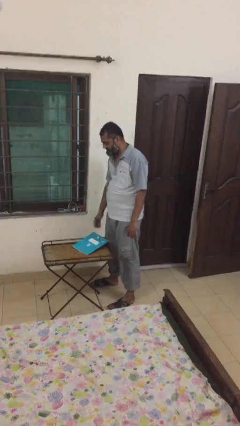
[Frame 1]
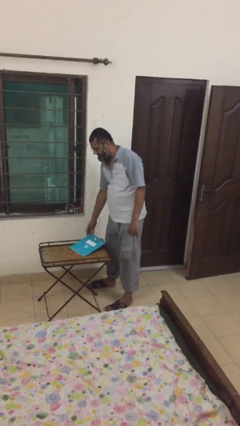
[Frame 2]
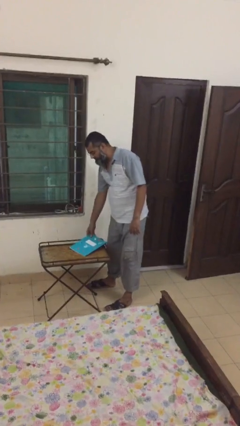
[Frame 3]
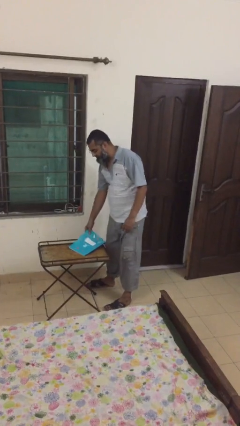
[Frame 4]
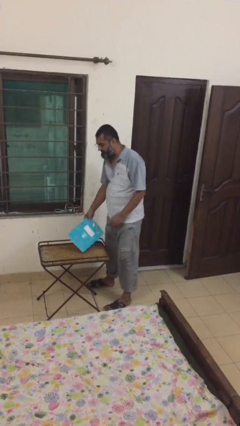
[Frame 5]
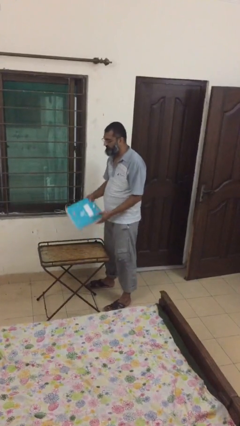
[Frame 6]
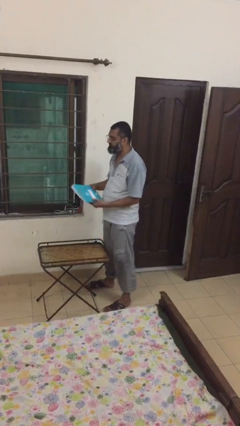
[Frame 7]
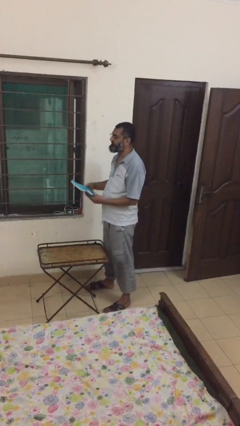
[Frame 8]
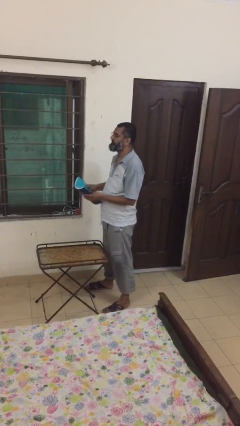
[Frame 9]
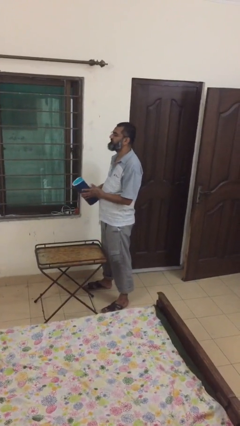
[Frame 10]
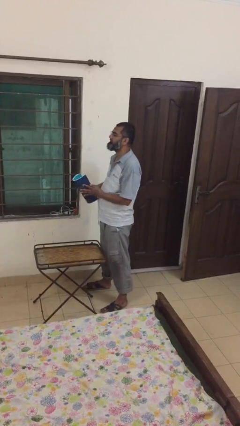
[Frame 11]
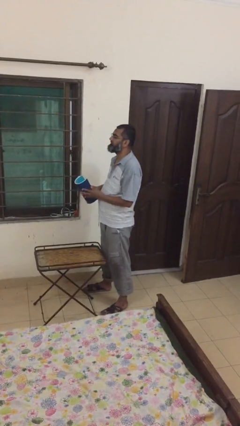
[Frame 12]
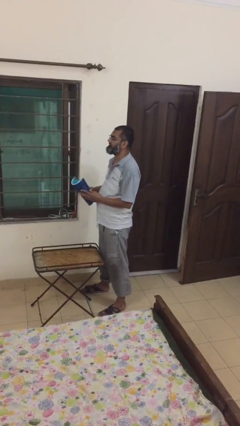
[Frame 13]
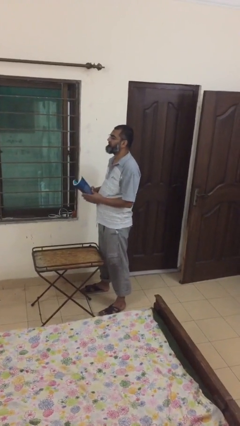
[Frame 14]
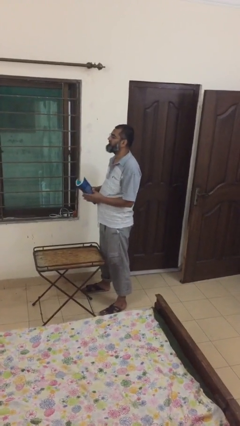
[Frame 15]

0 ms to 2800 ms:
person picks up object from table

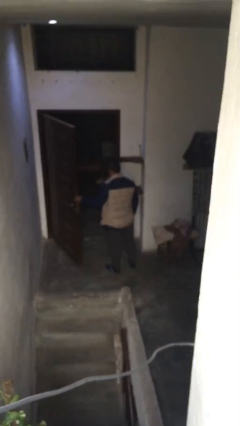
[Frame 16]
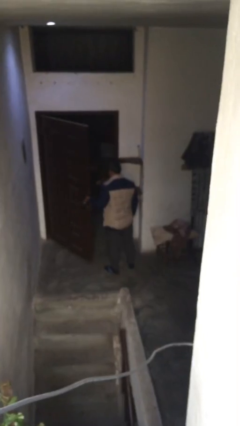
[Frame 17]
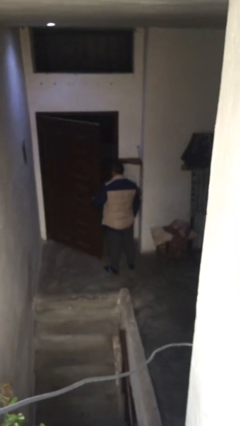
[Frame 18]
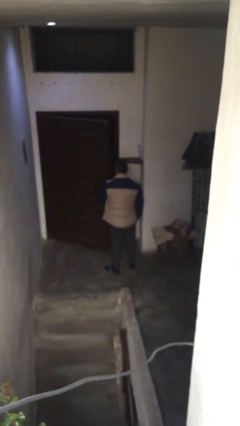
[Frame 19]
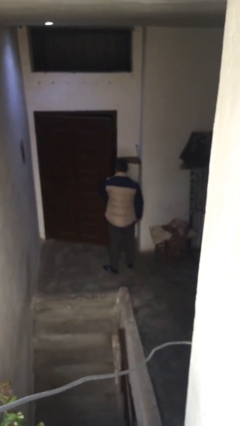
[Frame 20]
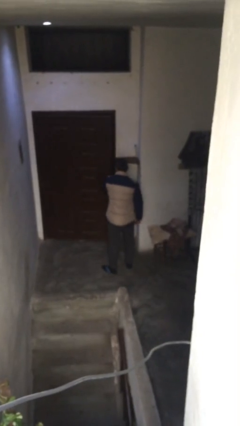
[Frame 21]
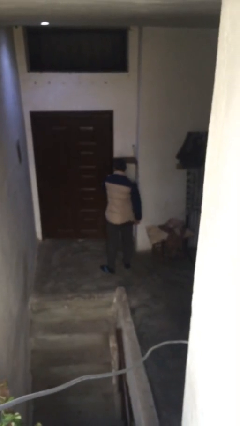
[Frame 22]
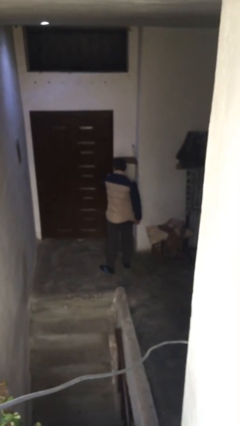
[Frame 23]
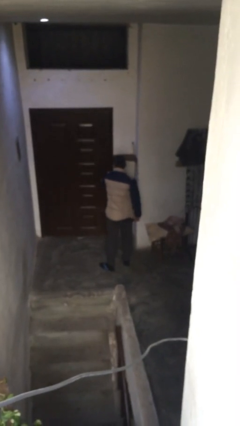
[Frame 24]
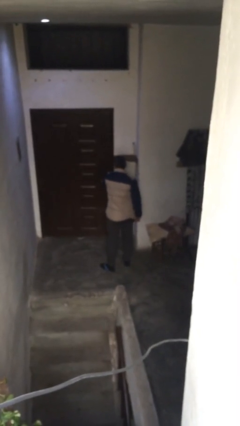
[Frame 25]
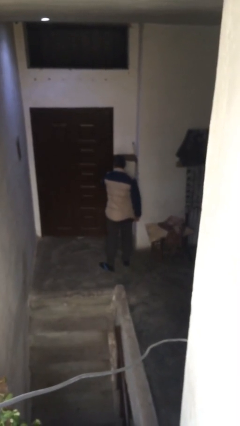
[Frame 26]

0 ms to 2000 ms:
person closes facility door

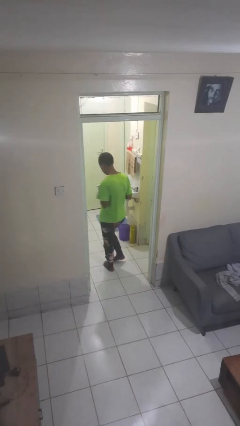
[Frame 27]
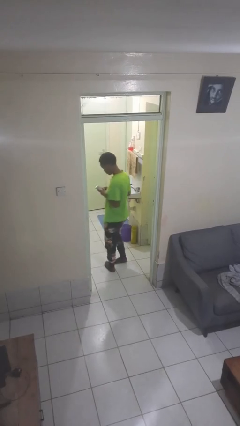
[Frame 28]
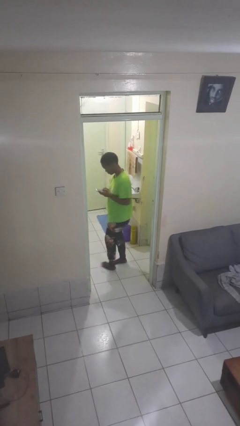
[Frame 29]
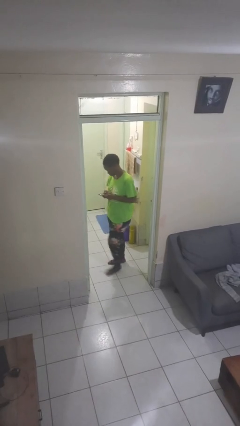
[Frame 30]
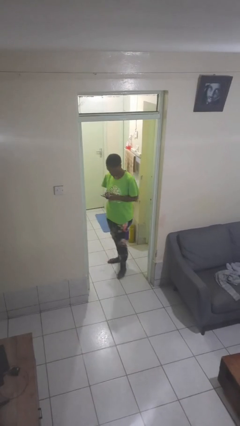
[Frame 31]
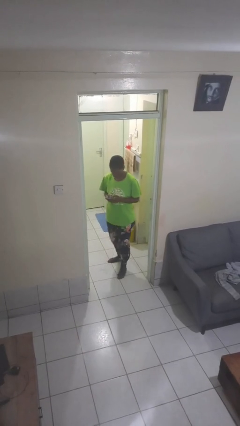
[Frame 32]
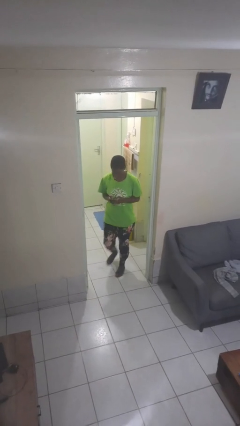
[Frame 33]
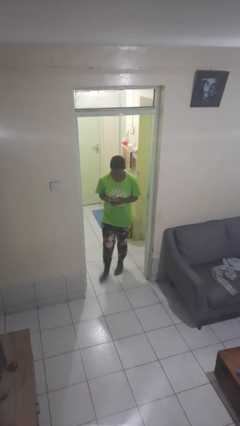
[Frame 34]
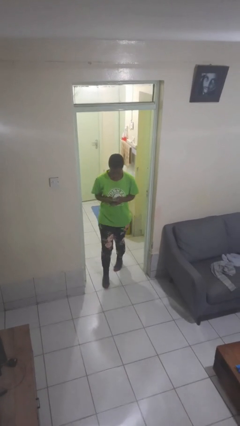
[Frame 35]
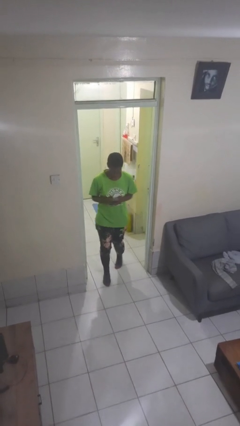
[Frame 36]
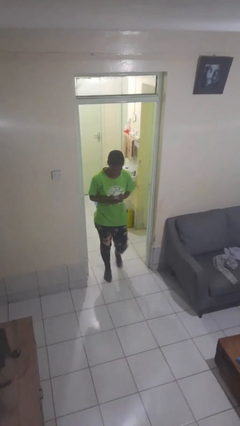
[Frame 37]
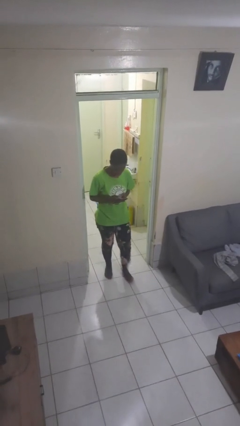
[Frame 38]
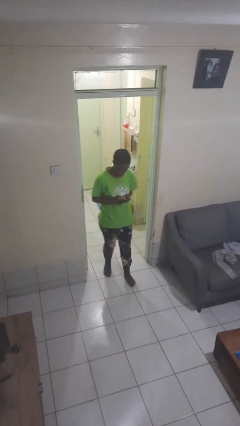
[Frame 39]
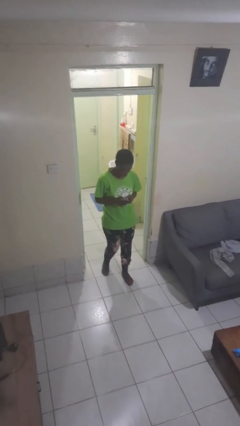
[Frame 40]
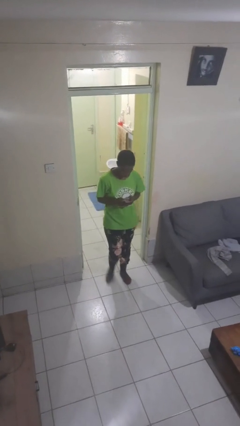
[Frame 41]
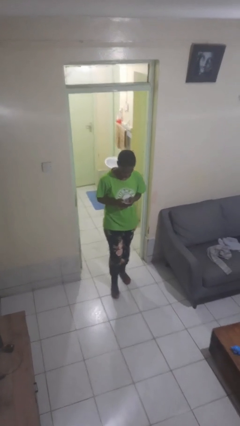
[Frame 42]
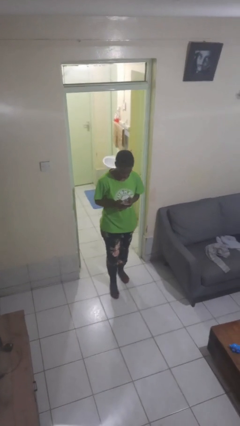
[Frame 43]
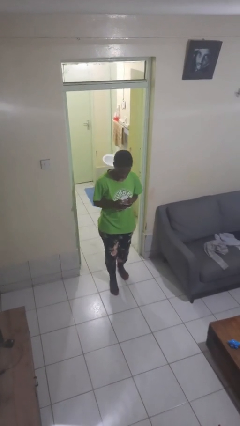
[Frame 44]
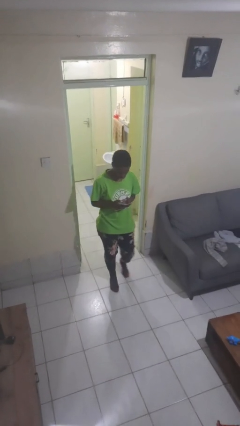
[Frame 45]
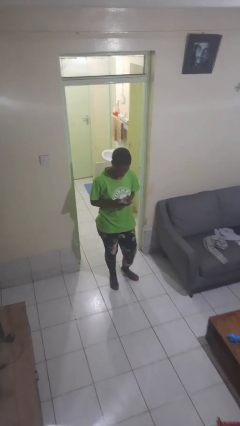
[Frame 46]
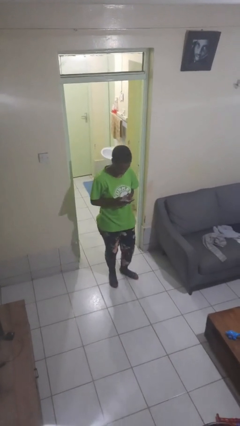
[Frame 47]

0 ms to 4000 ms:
person enters scene through structure

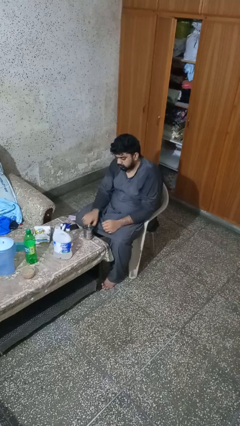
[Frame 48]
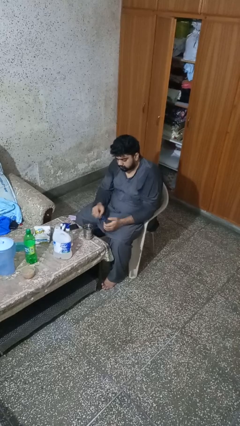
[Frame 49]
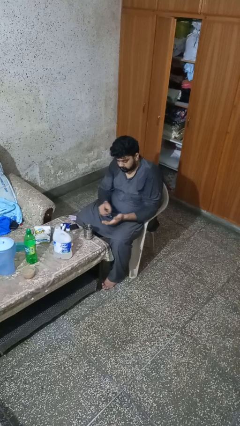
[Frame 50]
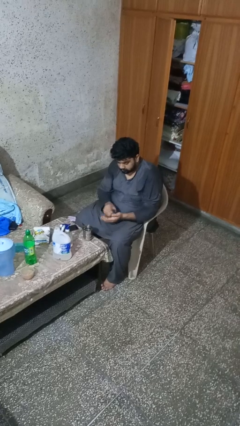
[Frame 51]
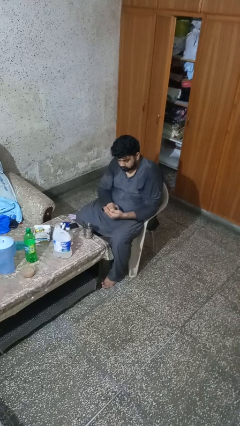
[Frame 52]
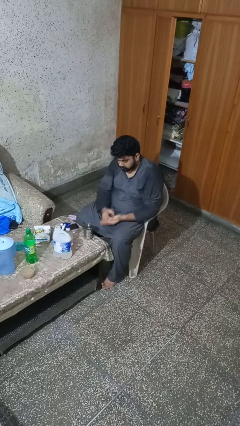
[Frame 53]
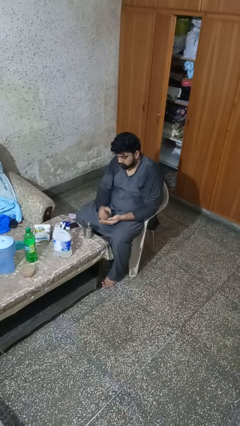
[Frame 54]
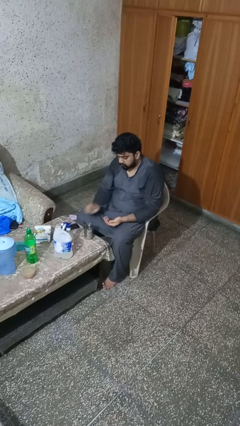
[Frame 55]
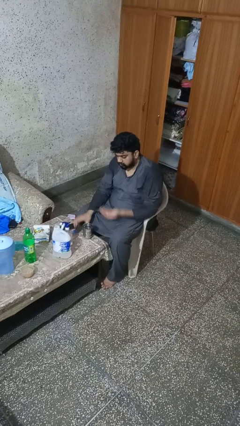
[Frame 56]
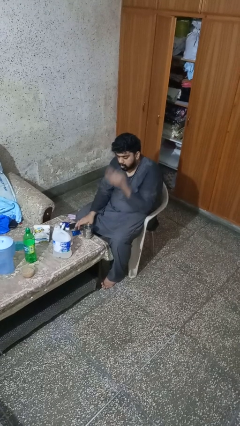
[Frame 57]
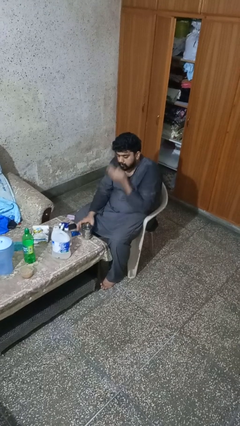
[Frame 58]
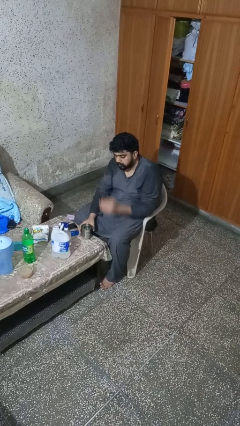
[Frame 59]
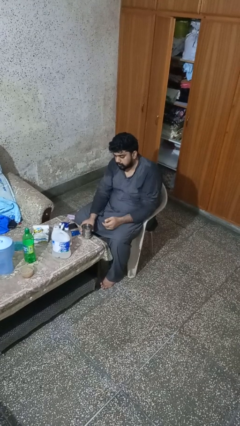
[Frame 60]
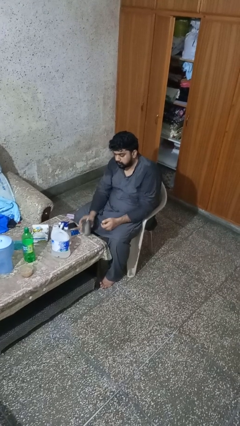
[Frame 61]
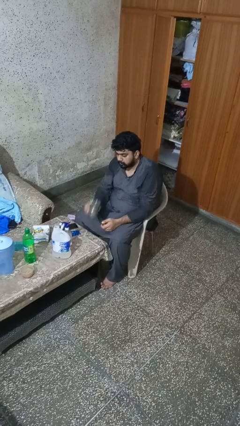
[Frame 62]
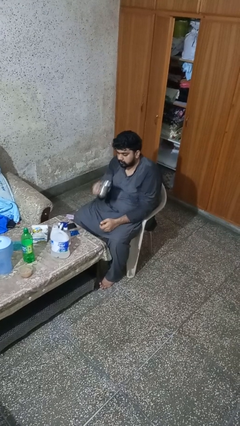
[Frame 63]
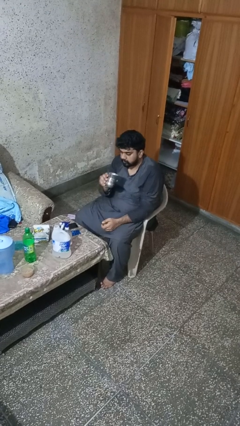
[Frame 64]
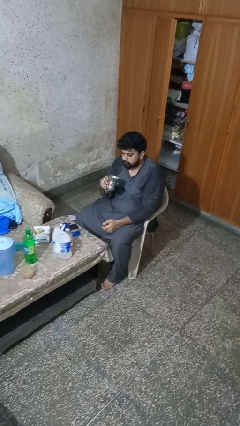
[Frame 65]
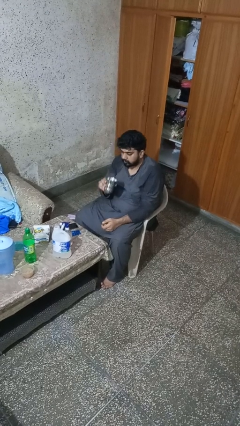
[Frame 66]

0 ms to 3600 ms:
person takes medicine pills

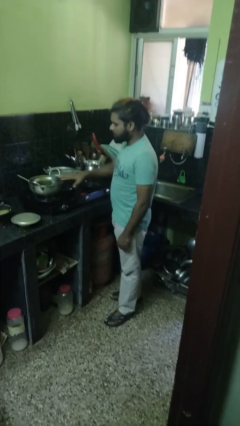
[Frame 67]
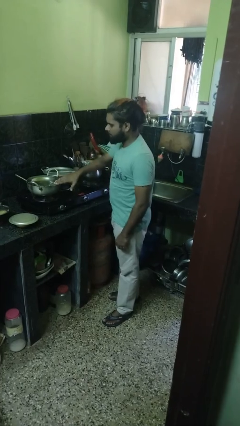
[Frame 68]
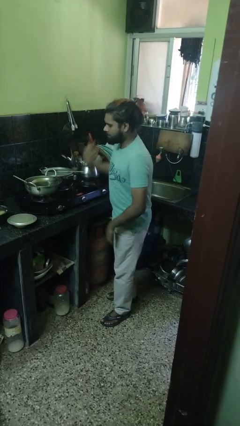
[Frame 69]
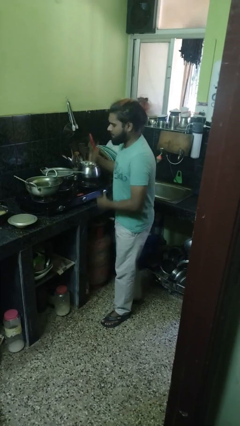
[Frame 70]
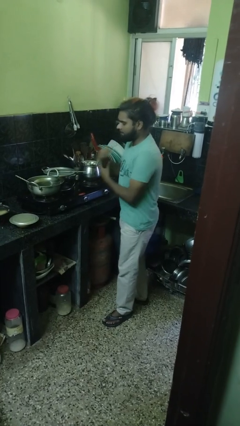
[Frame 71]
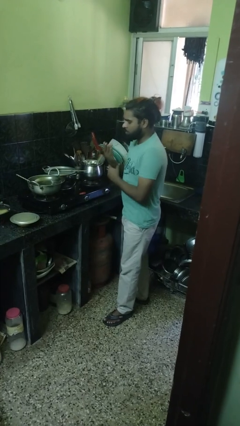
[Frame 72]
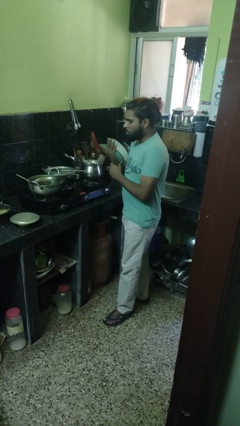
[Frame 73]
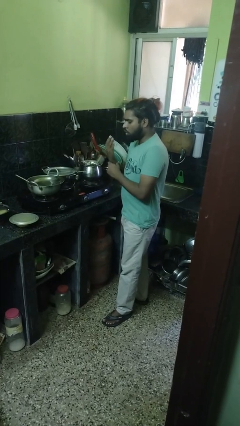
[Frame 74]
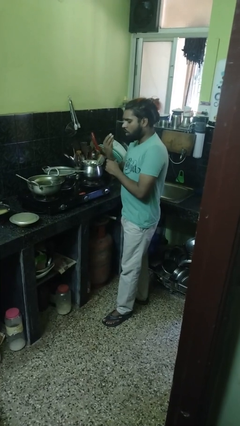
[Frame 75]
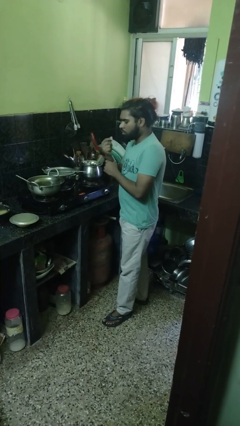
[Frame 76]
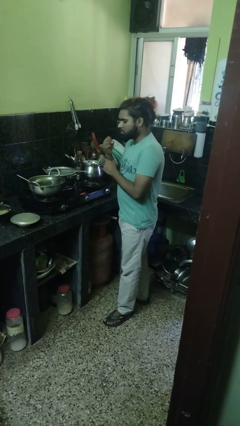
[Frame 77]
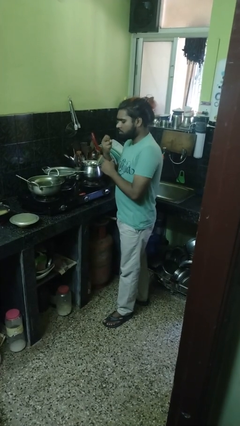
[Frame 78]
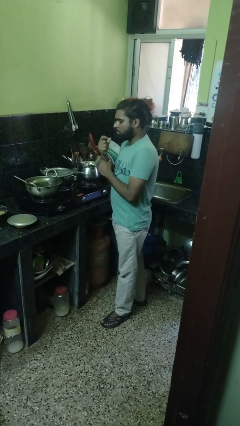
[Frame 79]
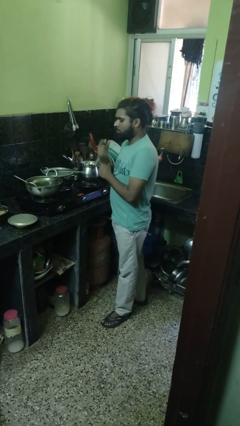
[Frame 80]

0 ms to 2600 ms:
person burns hand

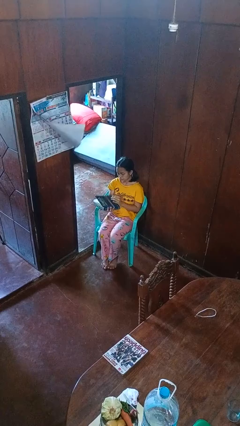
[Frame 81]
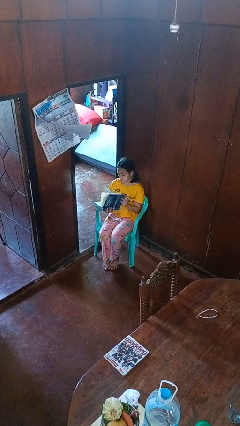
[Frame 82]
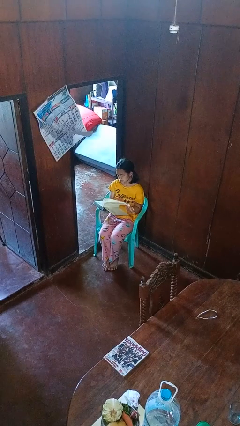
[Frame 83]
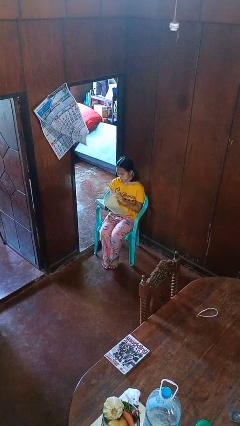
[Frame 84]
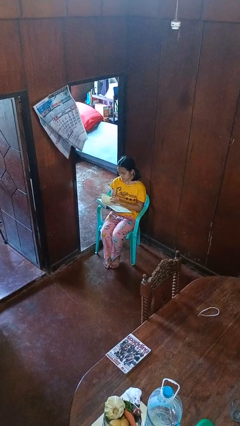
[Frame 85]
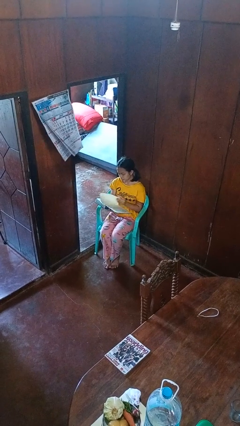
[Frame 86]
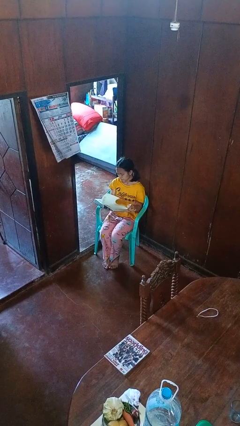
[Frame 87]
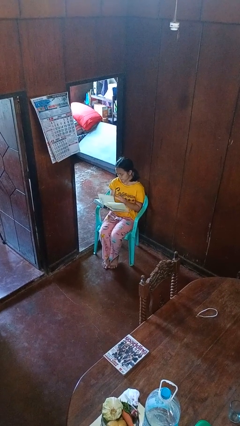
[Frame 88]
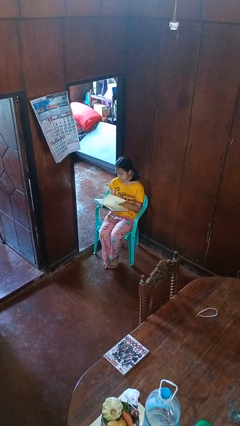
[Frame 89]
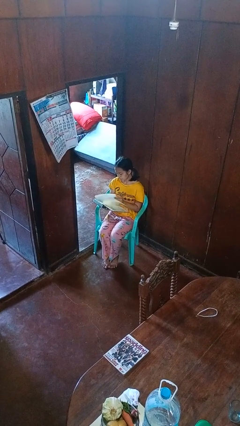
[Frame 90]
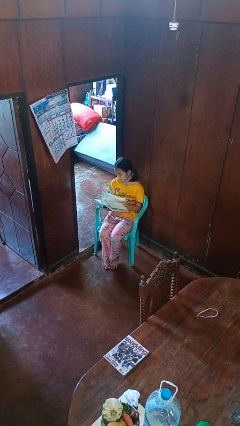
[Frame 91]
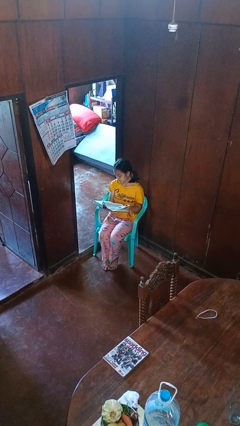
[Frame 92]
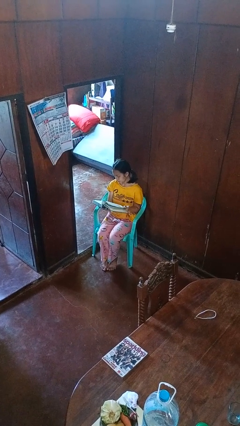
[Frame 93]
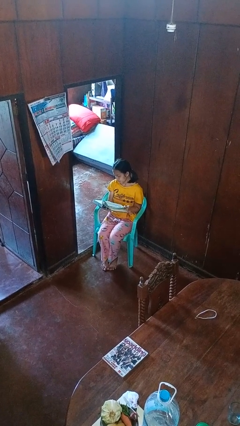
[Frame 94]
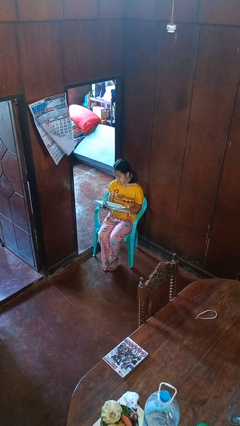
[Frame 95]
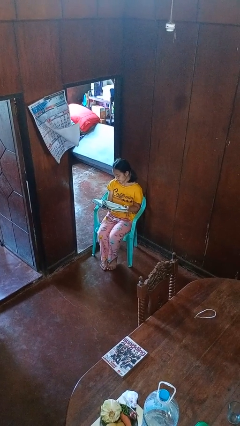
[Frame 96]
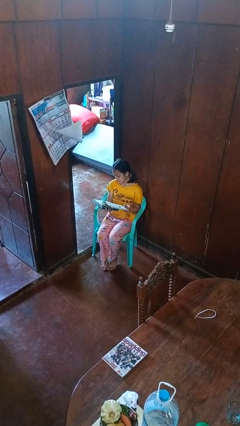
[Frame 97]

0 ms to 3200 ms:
person reads book
